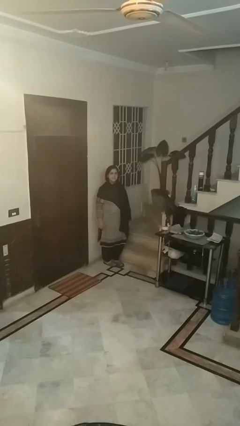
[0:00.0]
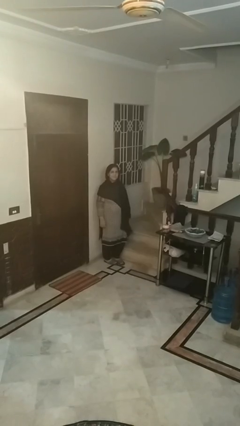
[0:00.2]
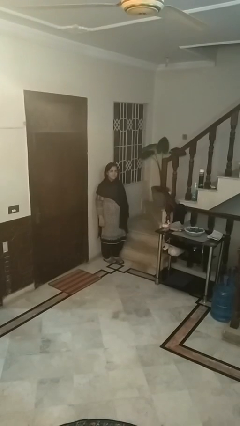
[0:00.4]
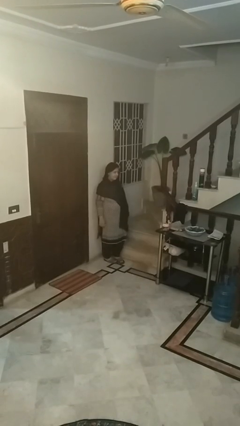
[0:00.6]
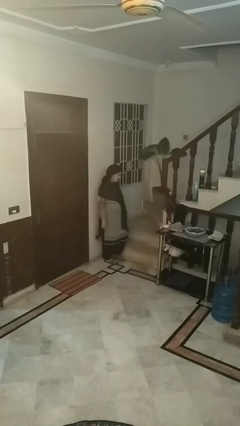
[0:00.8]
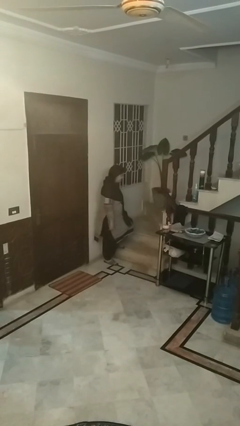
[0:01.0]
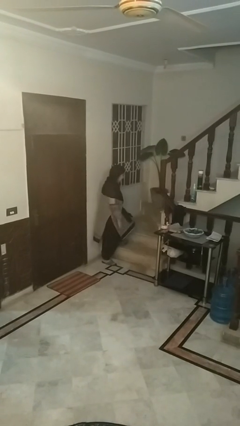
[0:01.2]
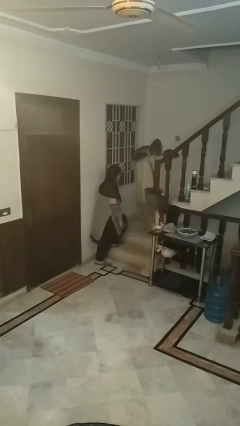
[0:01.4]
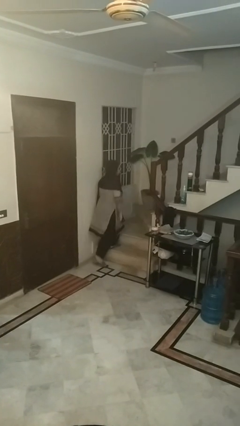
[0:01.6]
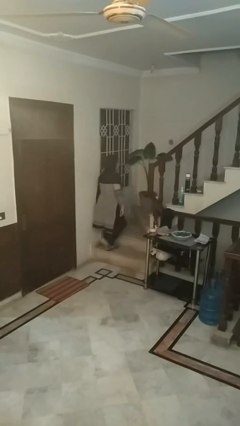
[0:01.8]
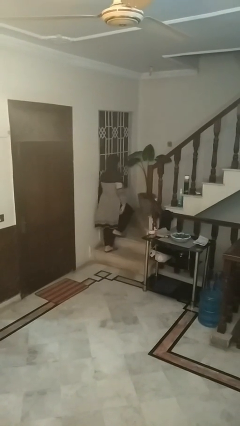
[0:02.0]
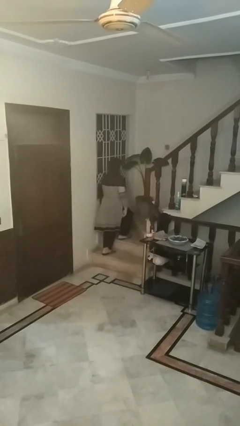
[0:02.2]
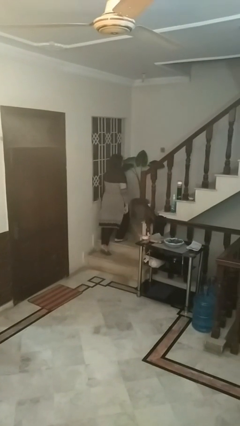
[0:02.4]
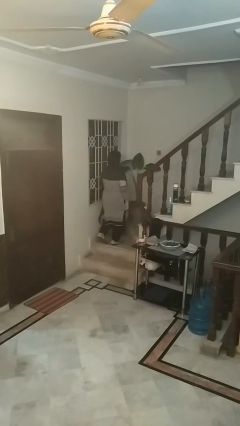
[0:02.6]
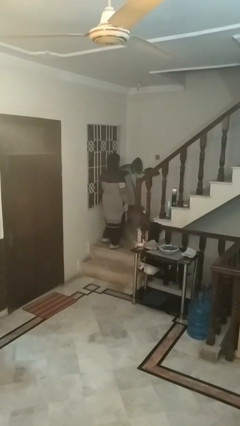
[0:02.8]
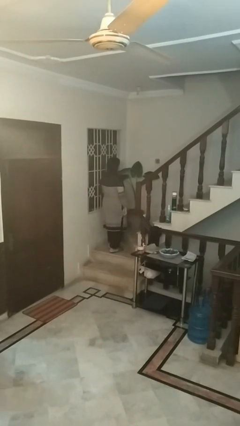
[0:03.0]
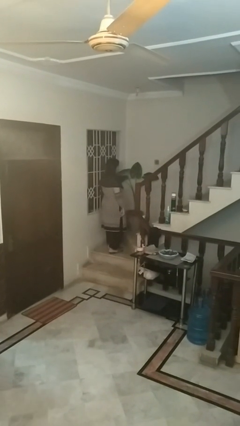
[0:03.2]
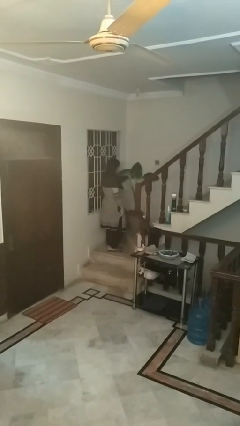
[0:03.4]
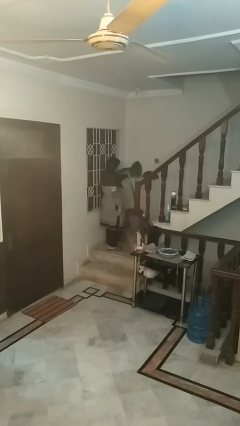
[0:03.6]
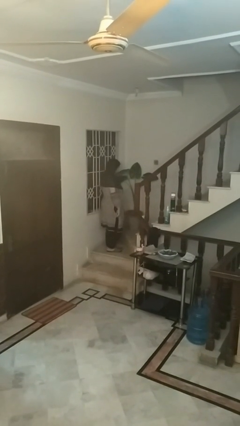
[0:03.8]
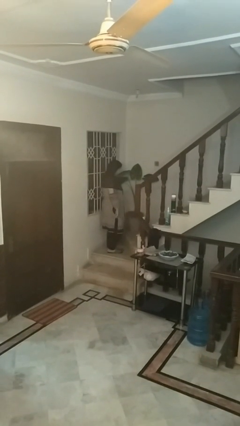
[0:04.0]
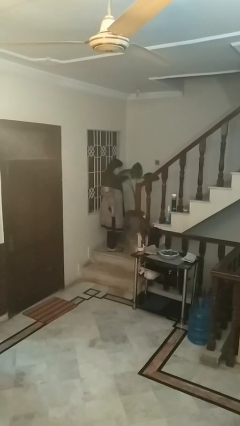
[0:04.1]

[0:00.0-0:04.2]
person climbs up stairs

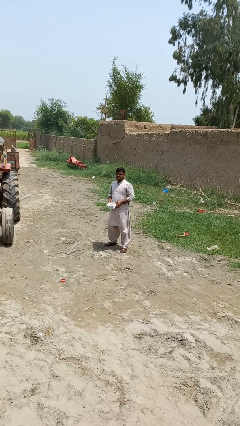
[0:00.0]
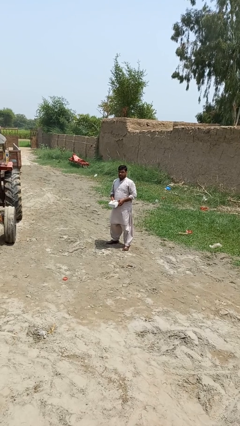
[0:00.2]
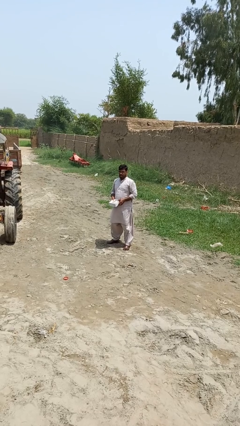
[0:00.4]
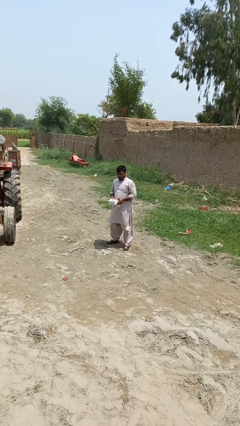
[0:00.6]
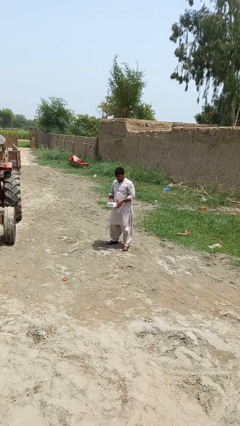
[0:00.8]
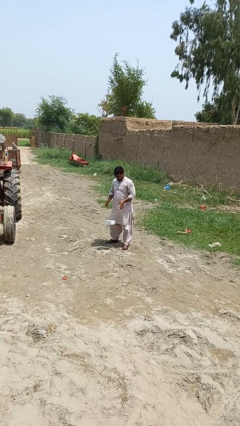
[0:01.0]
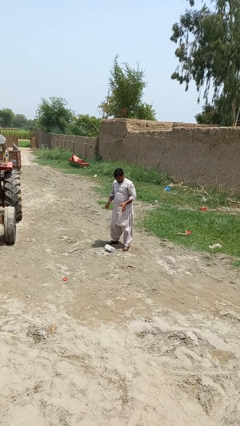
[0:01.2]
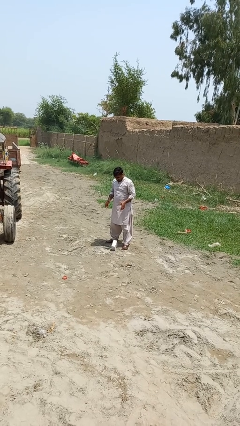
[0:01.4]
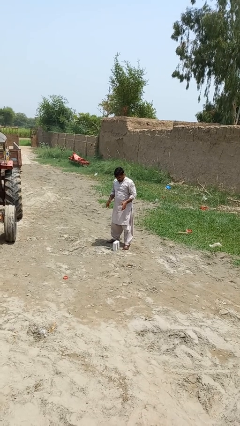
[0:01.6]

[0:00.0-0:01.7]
person drops object

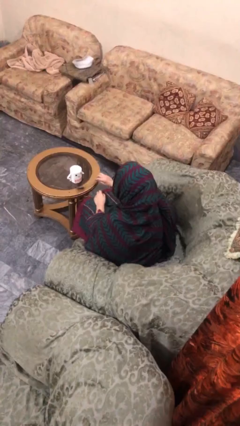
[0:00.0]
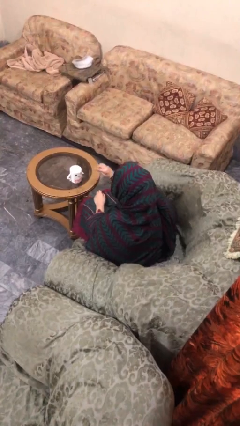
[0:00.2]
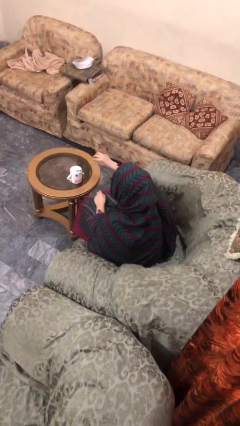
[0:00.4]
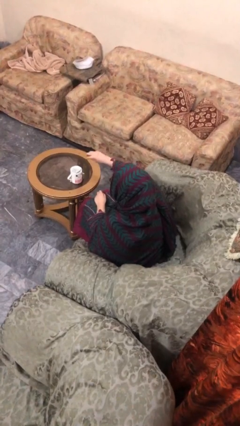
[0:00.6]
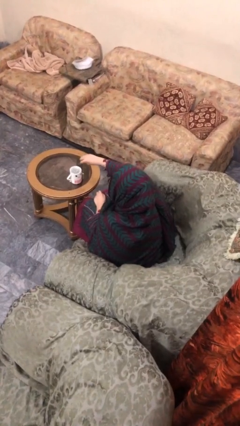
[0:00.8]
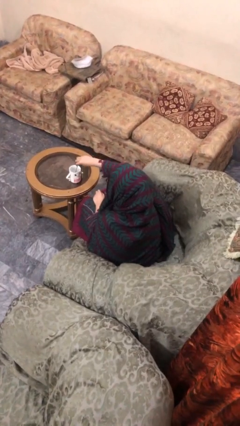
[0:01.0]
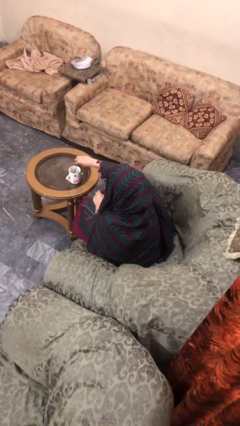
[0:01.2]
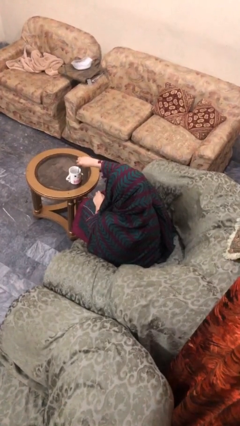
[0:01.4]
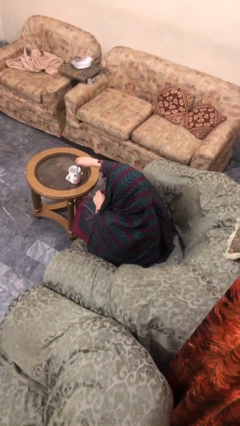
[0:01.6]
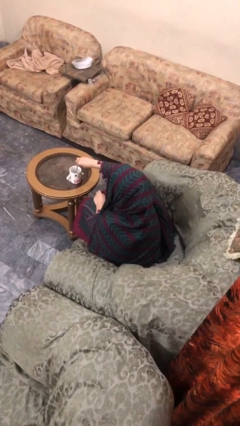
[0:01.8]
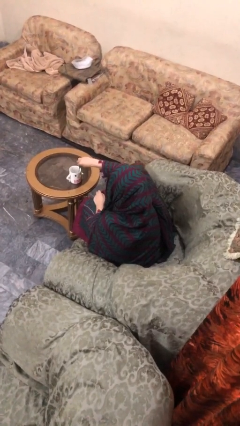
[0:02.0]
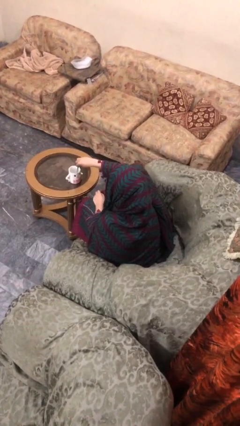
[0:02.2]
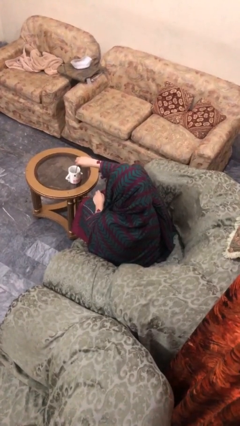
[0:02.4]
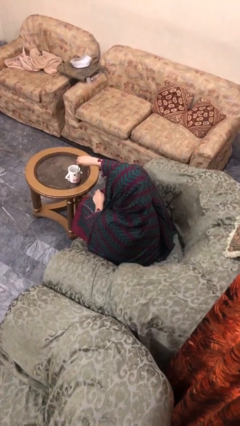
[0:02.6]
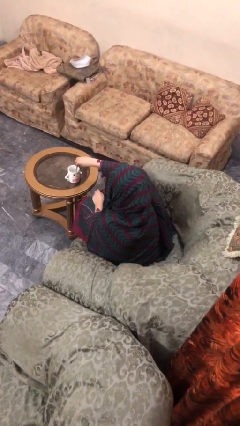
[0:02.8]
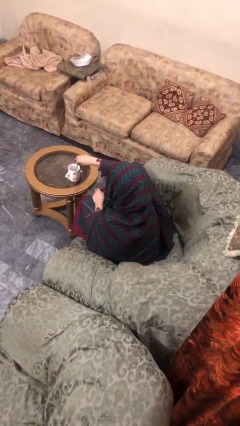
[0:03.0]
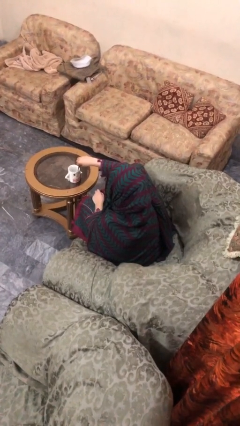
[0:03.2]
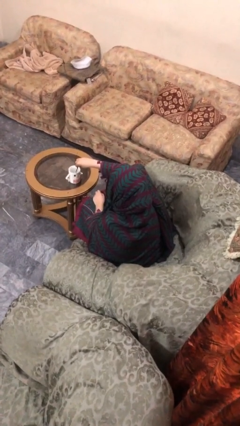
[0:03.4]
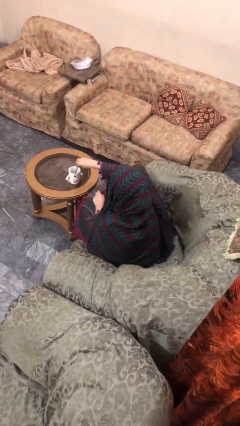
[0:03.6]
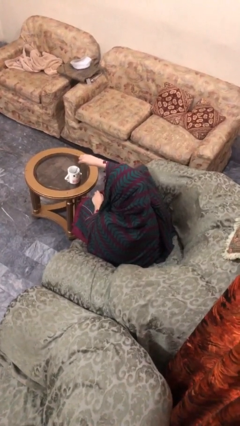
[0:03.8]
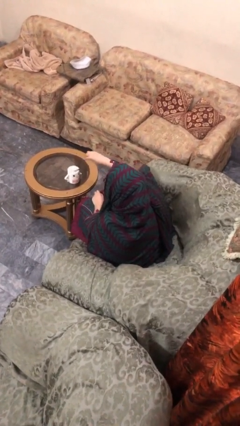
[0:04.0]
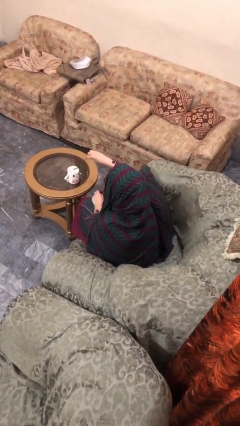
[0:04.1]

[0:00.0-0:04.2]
person stirs mug

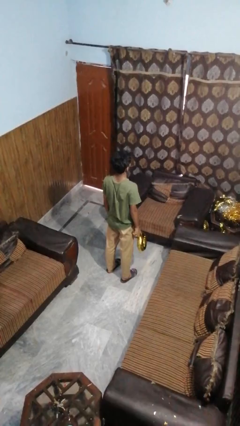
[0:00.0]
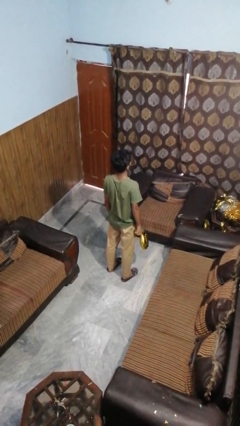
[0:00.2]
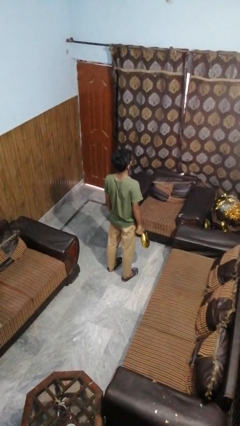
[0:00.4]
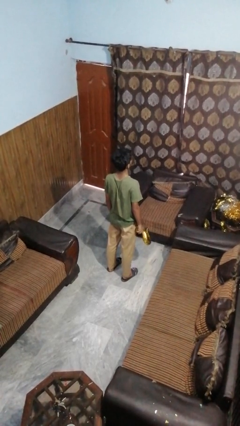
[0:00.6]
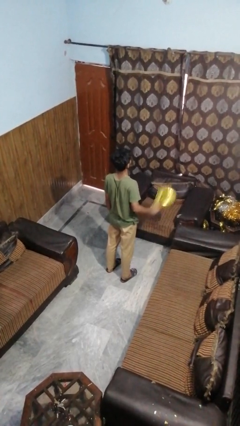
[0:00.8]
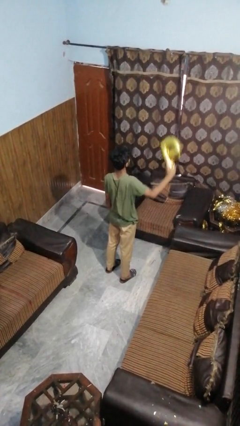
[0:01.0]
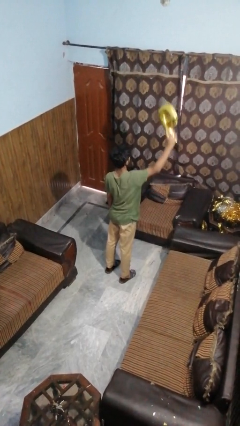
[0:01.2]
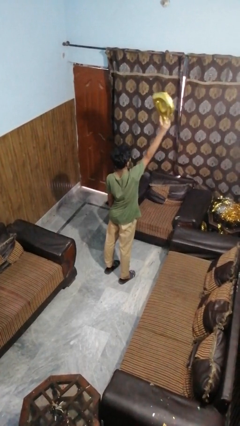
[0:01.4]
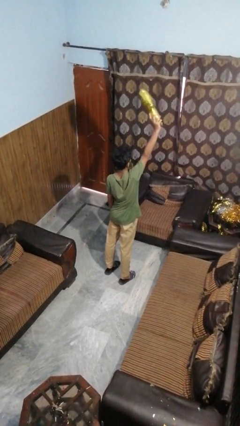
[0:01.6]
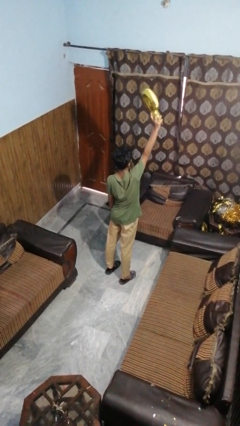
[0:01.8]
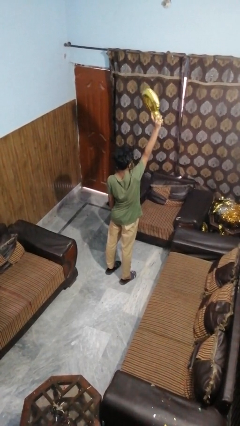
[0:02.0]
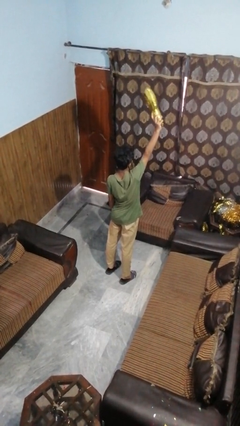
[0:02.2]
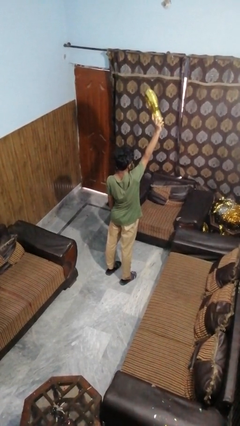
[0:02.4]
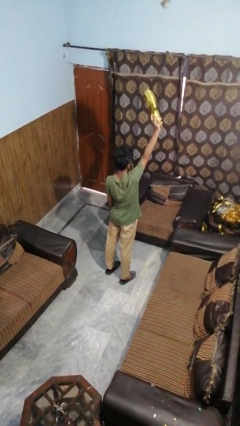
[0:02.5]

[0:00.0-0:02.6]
person holds object above head

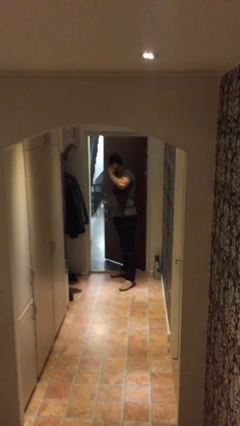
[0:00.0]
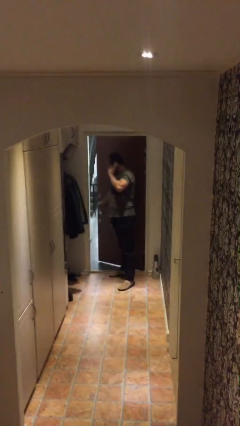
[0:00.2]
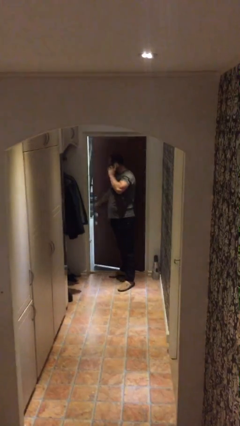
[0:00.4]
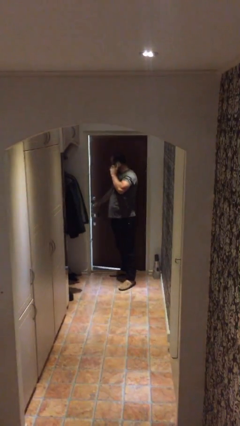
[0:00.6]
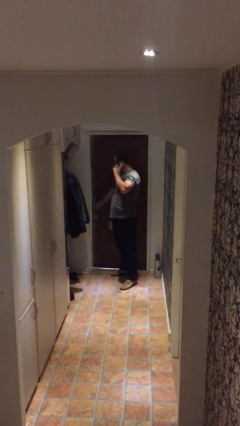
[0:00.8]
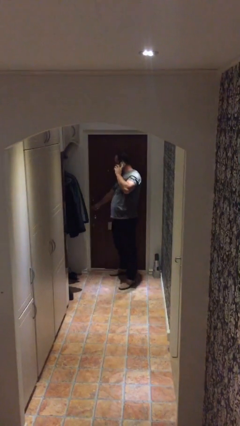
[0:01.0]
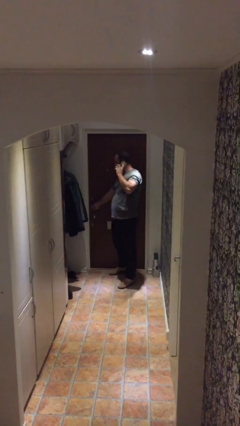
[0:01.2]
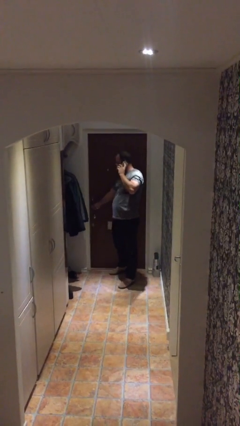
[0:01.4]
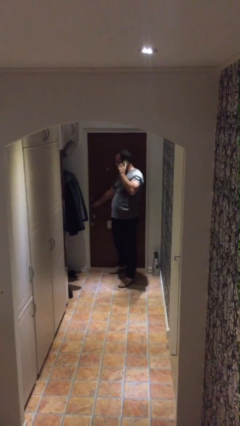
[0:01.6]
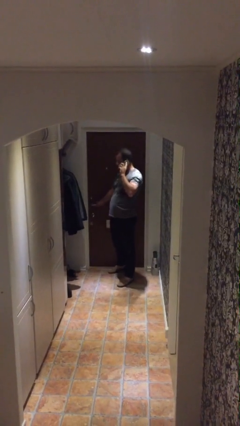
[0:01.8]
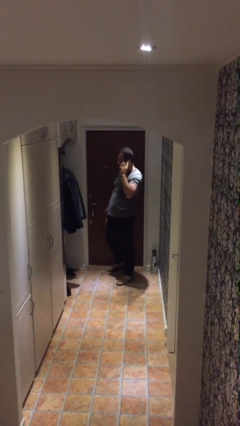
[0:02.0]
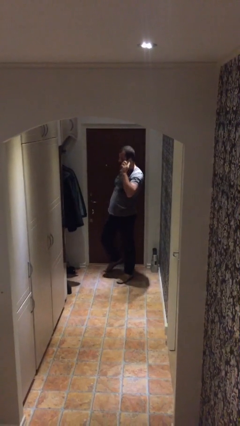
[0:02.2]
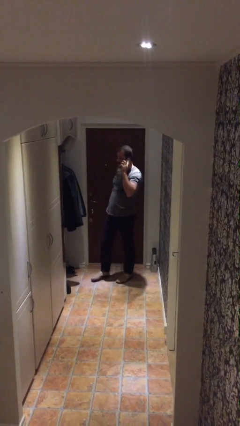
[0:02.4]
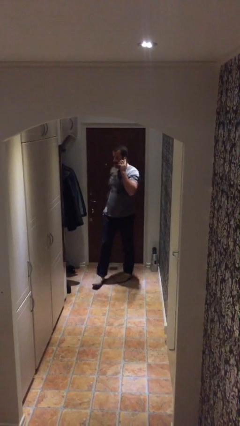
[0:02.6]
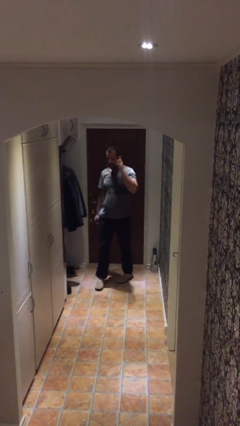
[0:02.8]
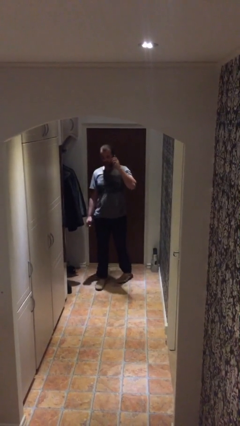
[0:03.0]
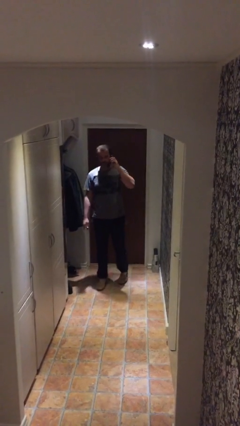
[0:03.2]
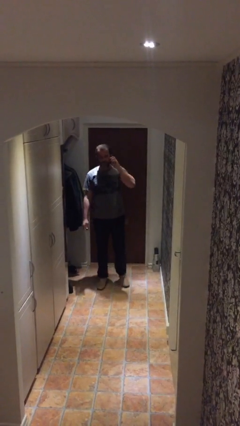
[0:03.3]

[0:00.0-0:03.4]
person closes facility door

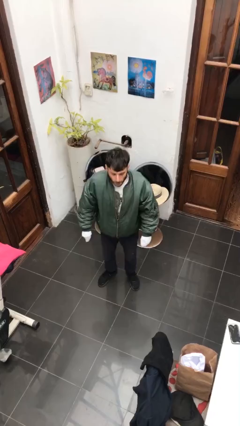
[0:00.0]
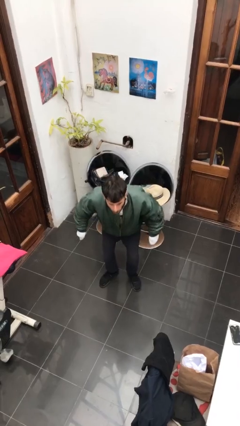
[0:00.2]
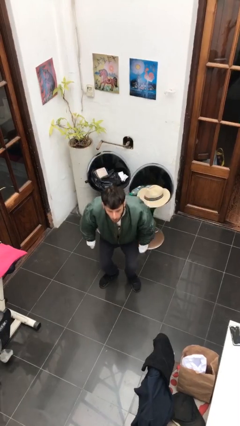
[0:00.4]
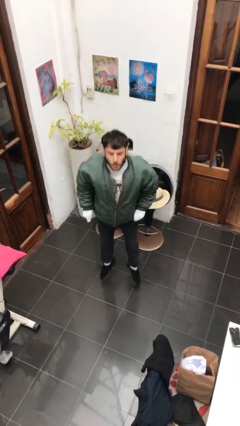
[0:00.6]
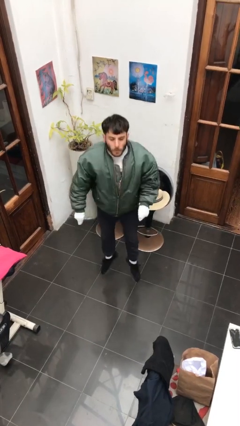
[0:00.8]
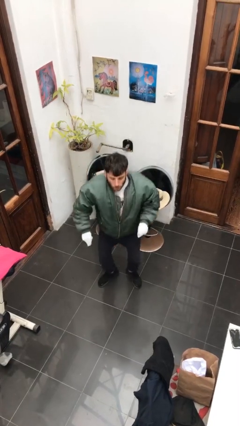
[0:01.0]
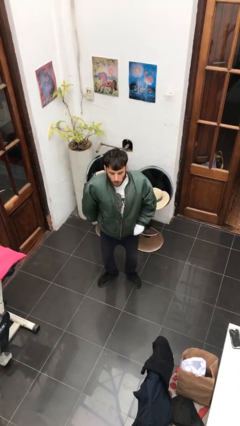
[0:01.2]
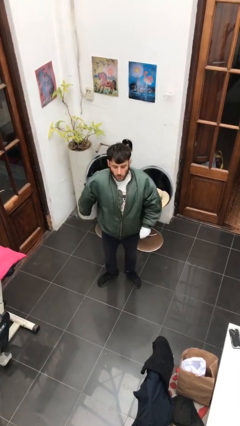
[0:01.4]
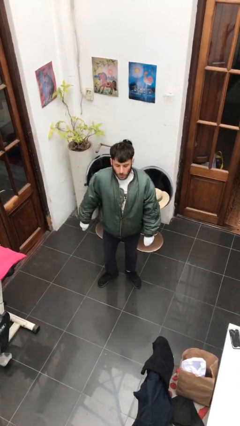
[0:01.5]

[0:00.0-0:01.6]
person jumps
